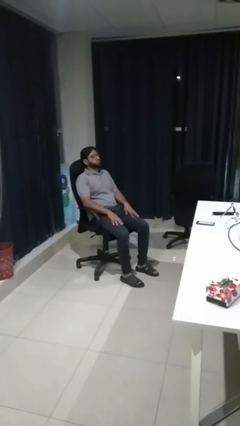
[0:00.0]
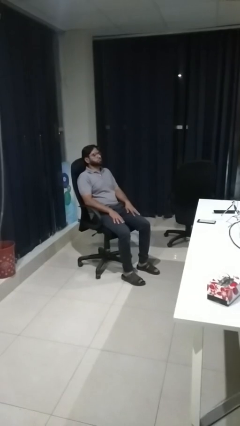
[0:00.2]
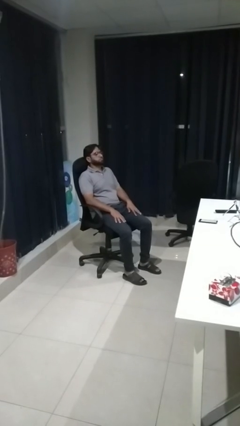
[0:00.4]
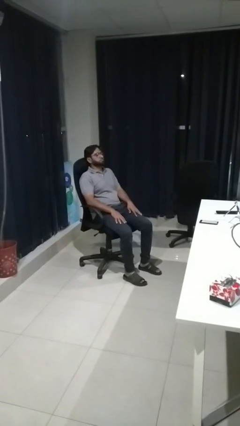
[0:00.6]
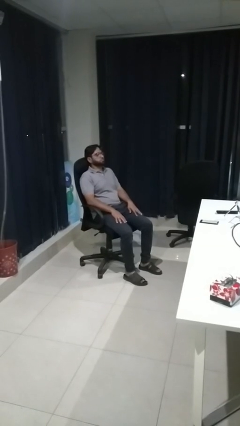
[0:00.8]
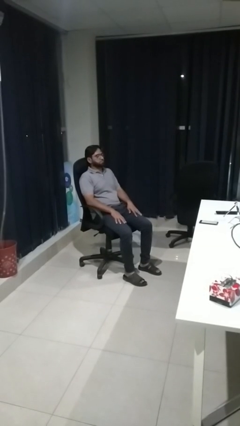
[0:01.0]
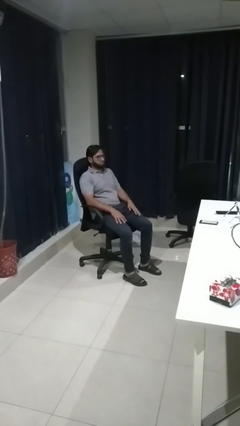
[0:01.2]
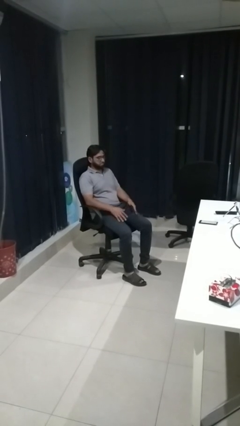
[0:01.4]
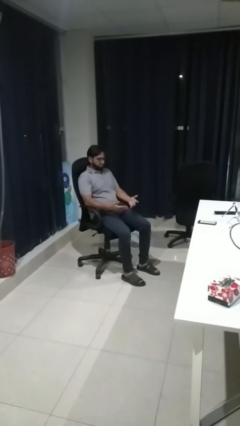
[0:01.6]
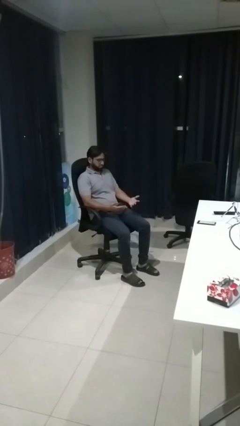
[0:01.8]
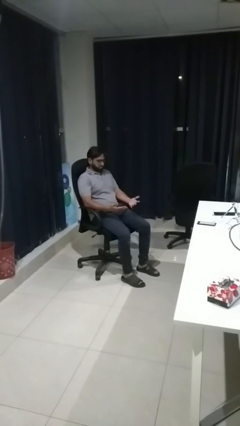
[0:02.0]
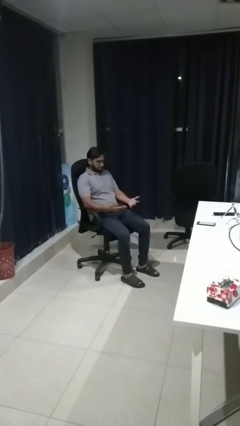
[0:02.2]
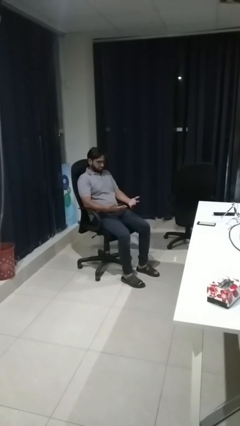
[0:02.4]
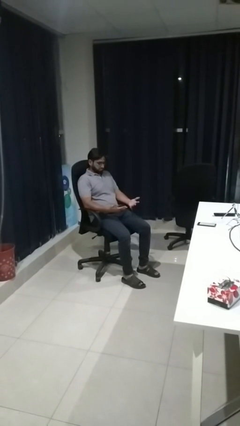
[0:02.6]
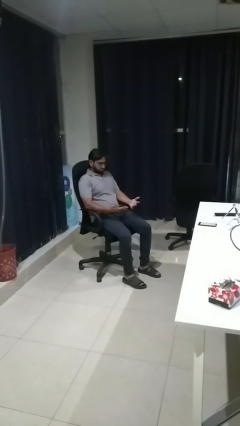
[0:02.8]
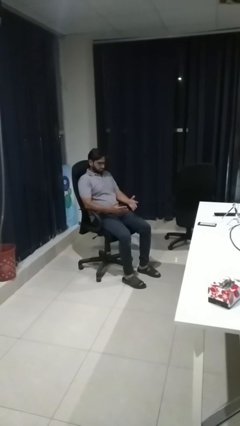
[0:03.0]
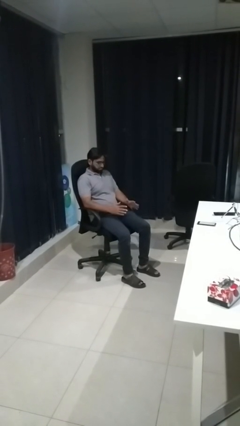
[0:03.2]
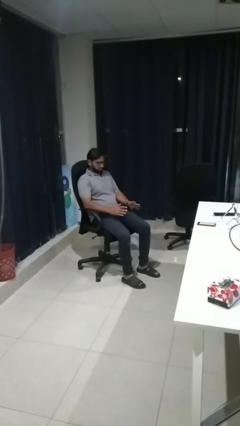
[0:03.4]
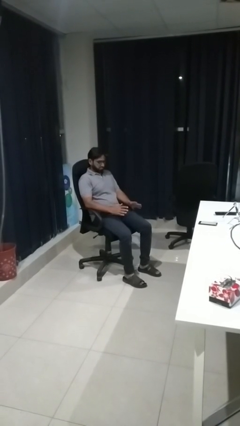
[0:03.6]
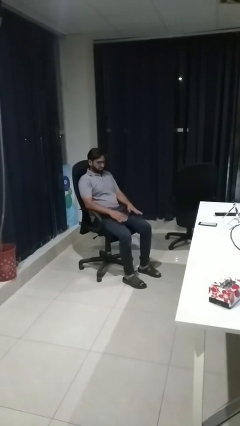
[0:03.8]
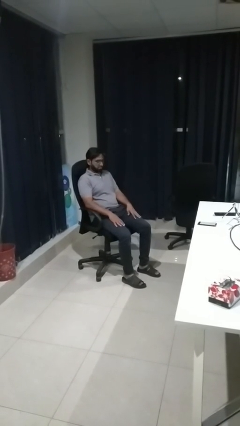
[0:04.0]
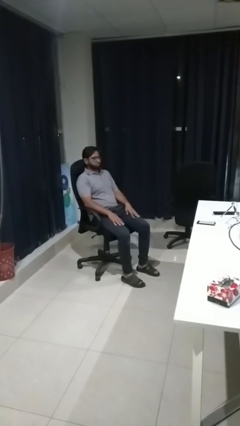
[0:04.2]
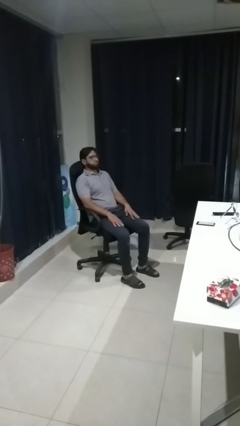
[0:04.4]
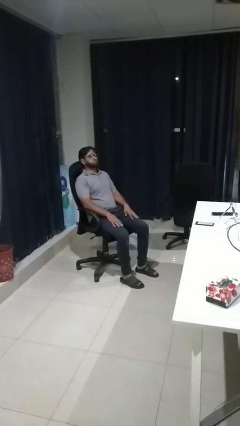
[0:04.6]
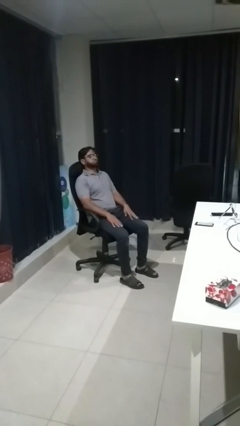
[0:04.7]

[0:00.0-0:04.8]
person looks at hands in lap

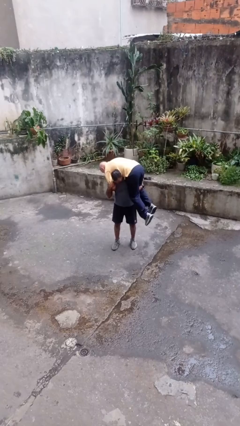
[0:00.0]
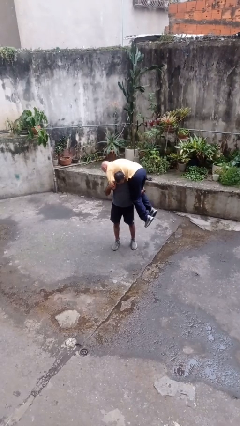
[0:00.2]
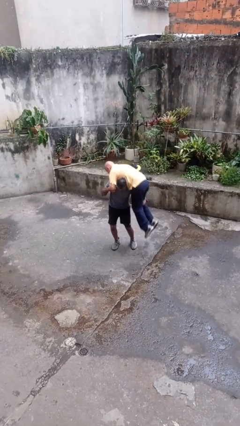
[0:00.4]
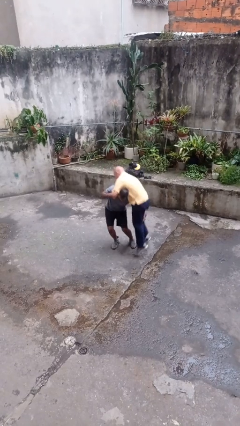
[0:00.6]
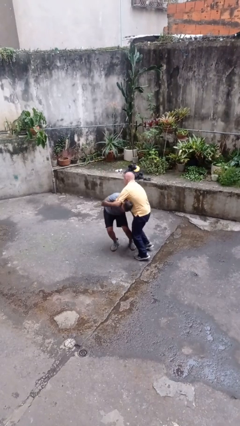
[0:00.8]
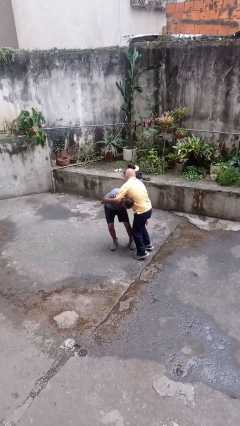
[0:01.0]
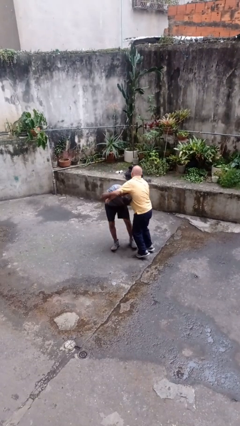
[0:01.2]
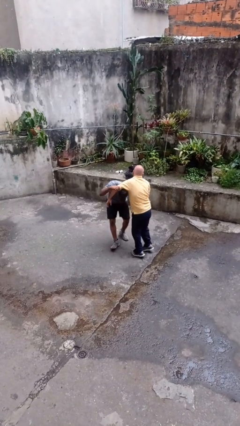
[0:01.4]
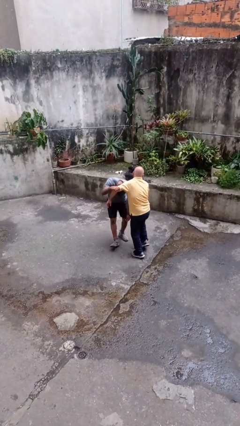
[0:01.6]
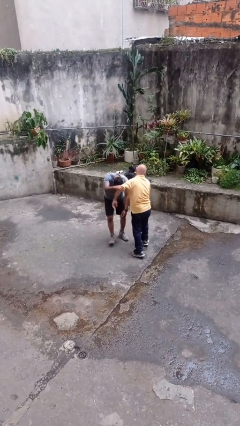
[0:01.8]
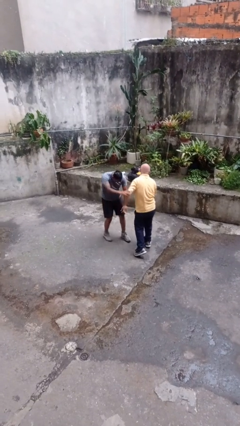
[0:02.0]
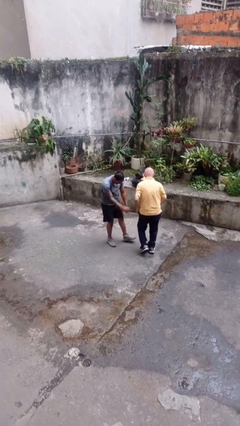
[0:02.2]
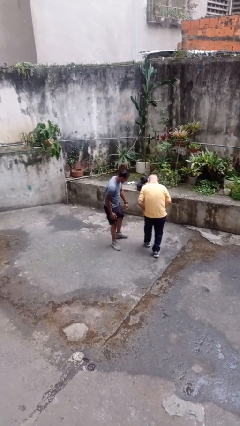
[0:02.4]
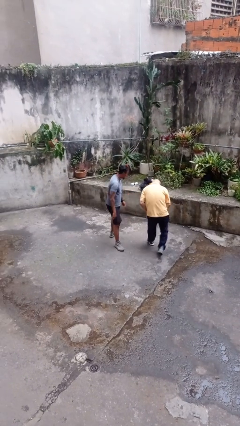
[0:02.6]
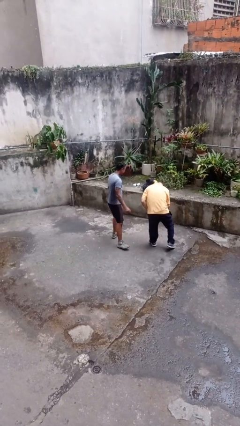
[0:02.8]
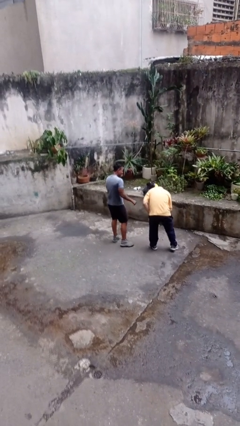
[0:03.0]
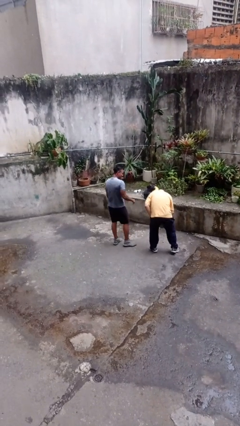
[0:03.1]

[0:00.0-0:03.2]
person puts down person

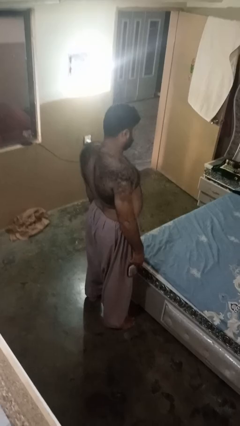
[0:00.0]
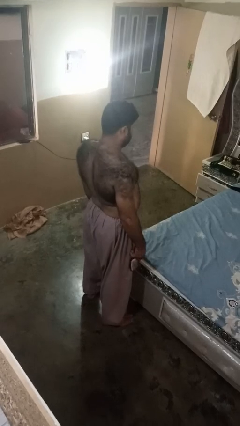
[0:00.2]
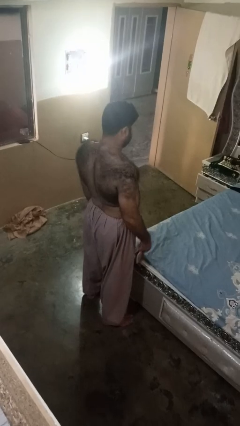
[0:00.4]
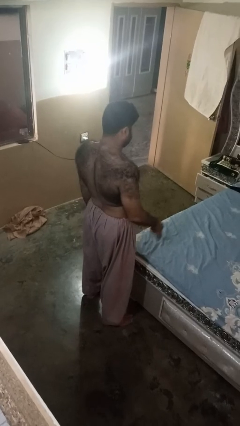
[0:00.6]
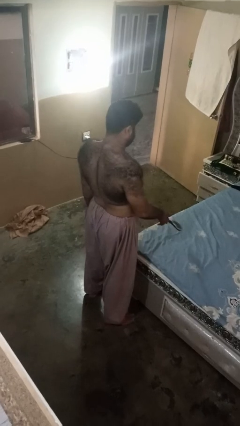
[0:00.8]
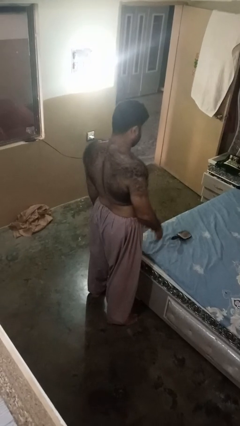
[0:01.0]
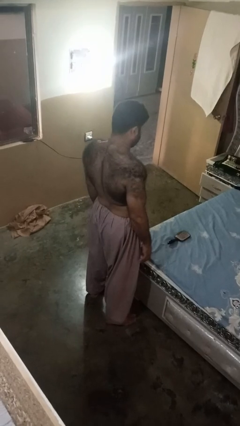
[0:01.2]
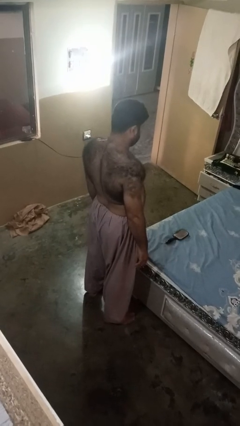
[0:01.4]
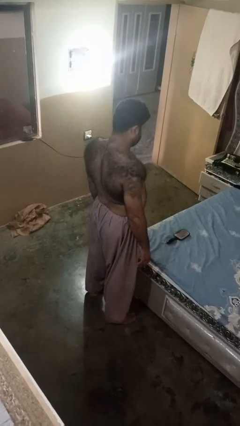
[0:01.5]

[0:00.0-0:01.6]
person throws object on bed

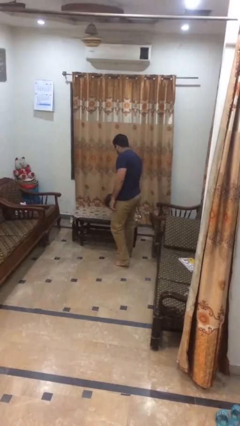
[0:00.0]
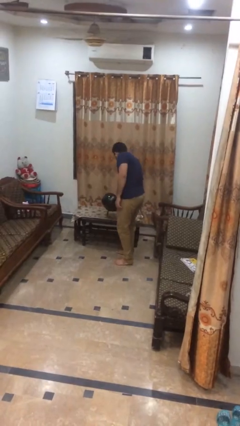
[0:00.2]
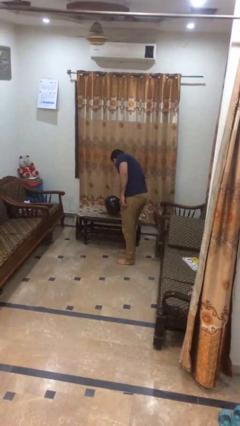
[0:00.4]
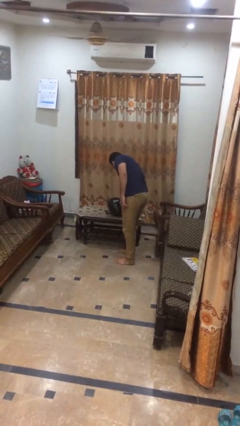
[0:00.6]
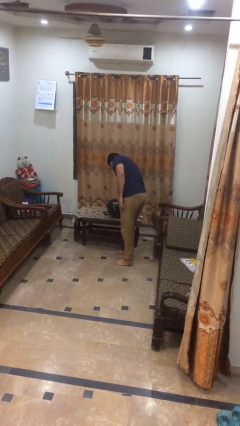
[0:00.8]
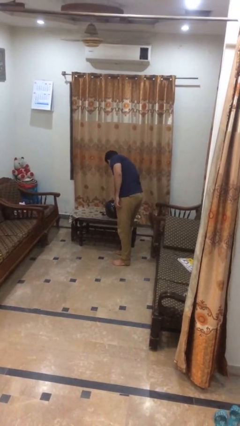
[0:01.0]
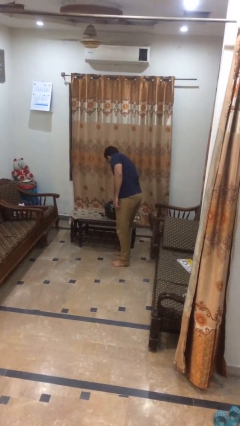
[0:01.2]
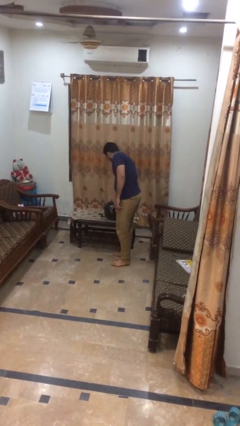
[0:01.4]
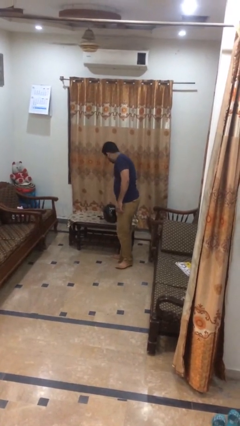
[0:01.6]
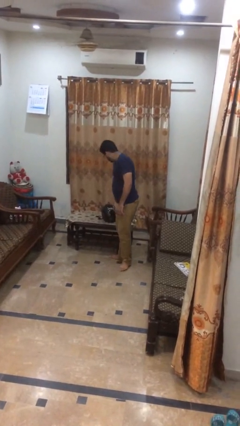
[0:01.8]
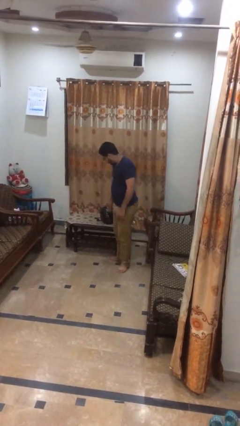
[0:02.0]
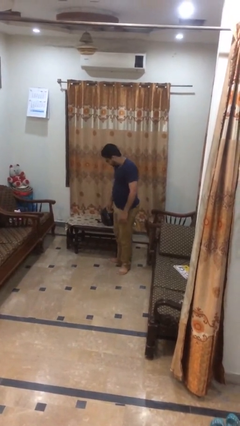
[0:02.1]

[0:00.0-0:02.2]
person puts down object on table

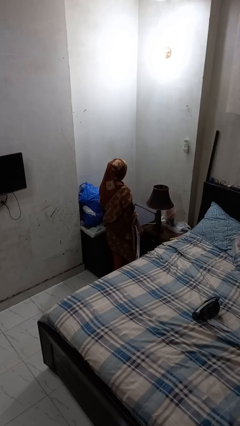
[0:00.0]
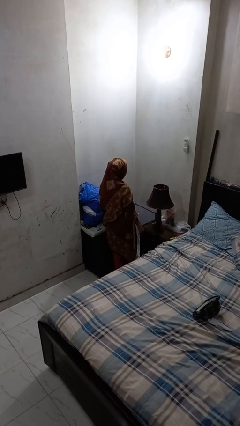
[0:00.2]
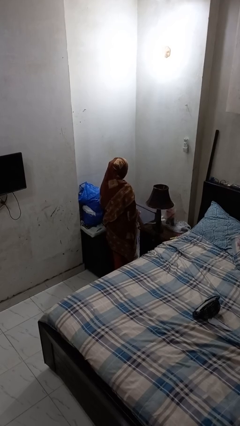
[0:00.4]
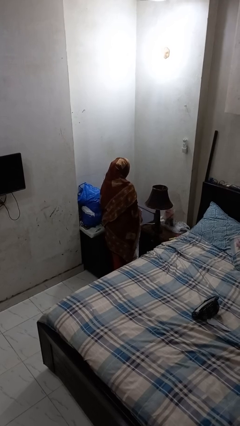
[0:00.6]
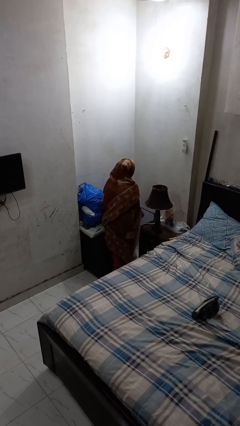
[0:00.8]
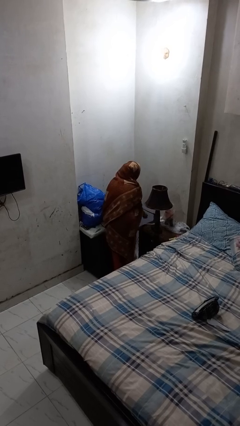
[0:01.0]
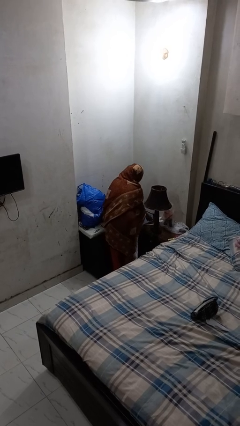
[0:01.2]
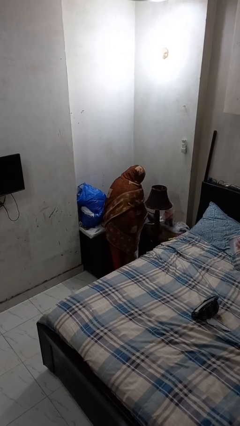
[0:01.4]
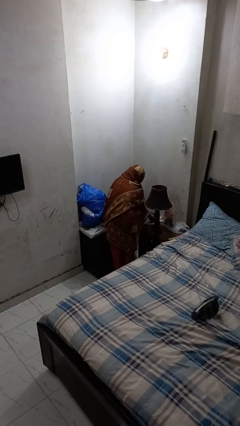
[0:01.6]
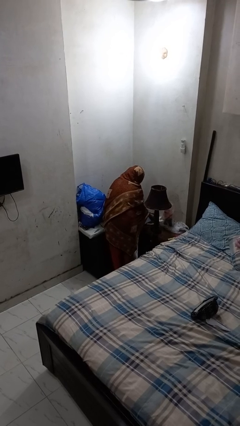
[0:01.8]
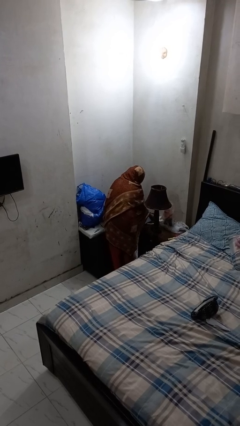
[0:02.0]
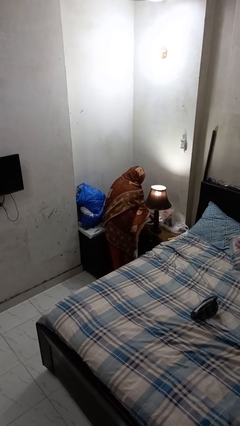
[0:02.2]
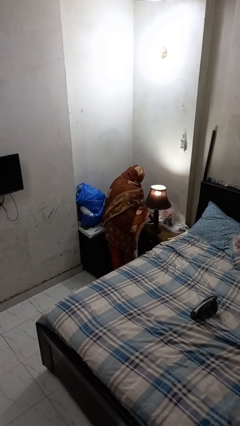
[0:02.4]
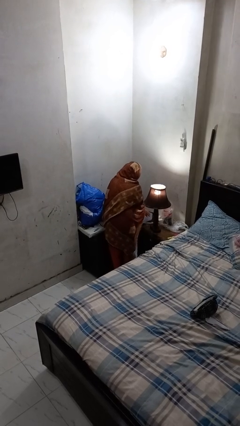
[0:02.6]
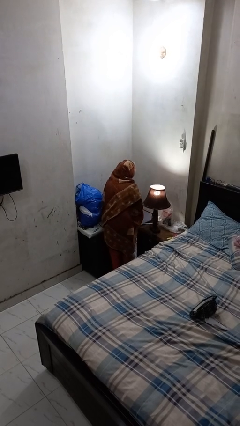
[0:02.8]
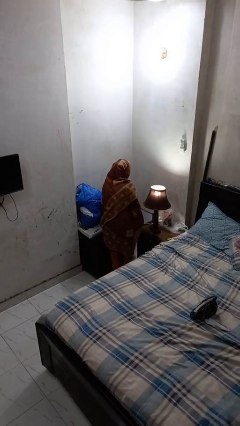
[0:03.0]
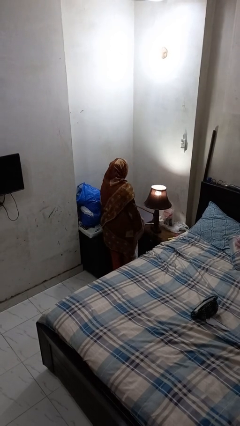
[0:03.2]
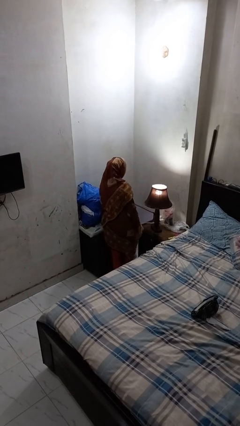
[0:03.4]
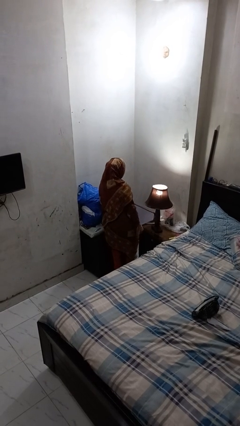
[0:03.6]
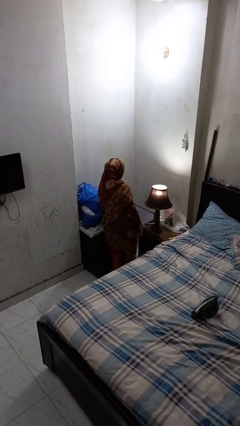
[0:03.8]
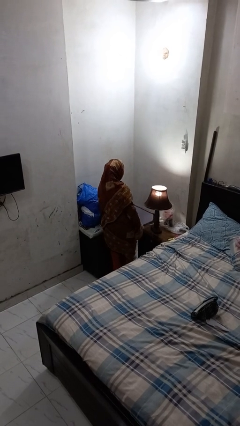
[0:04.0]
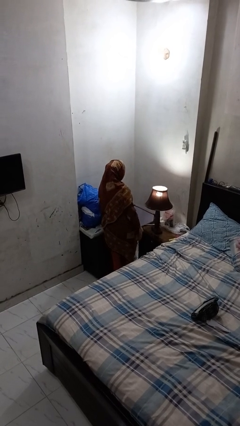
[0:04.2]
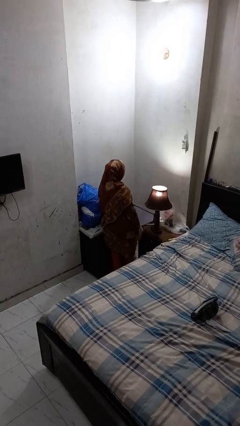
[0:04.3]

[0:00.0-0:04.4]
person turns on lamp

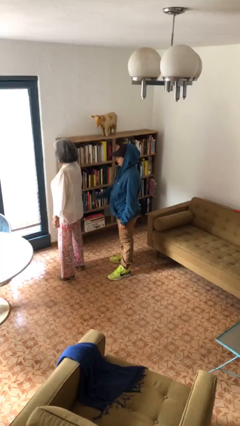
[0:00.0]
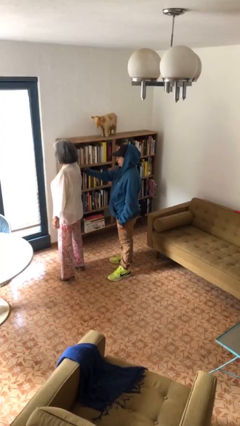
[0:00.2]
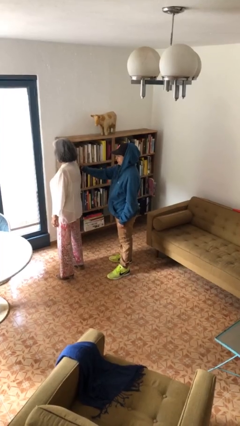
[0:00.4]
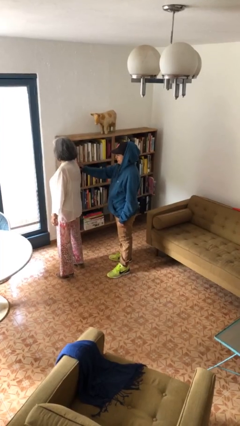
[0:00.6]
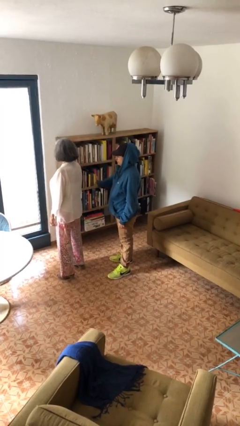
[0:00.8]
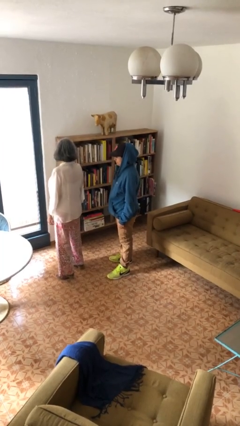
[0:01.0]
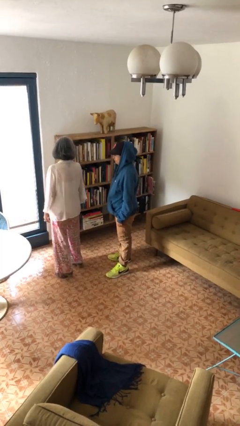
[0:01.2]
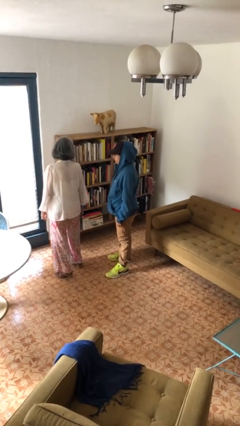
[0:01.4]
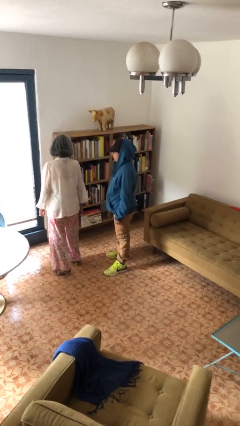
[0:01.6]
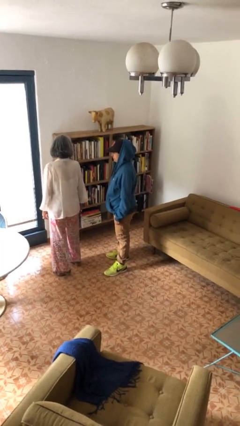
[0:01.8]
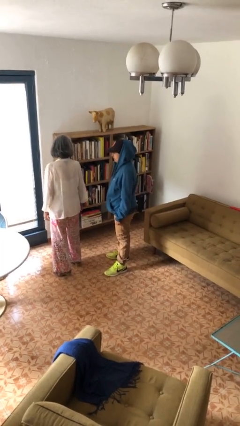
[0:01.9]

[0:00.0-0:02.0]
person touches back of person
